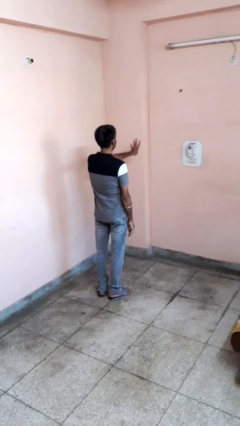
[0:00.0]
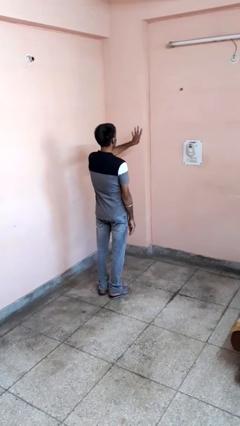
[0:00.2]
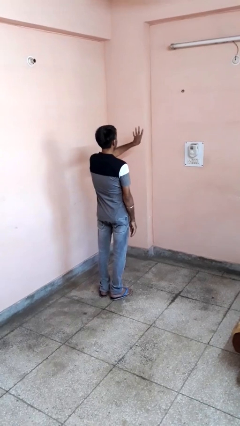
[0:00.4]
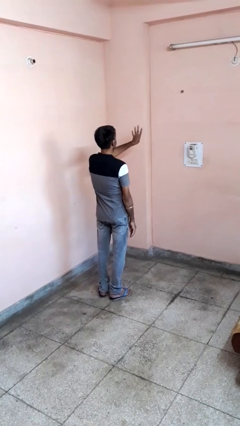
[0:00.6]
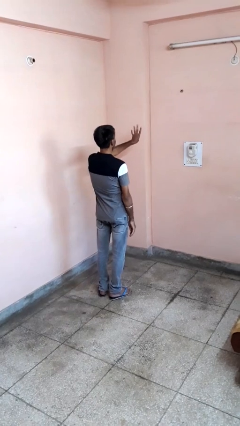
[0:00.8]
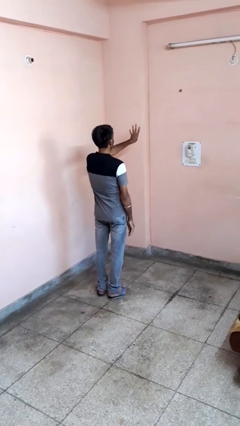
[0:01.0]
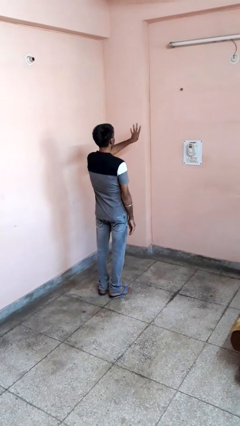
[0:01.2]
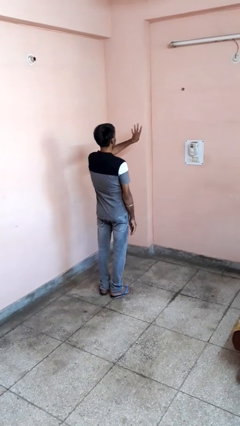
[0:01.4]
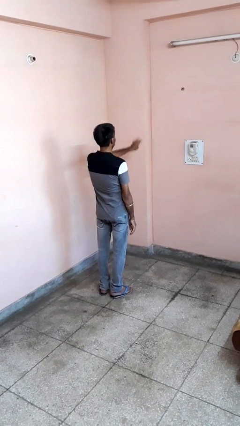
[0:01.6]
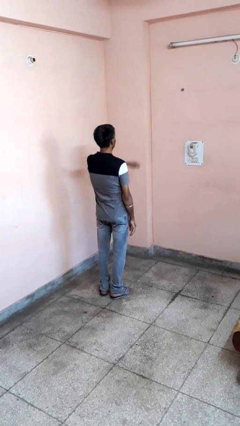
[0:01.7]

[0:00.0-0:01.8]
person gestures number four

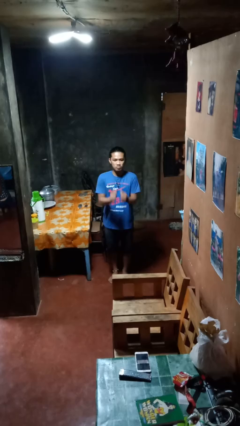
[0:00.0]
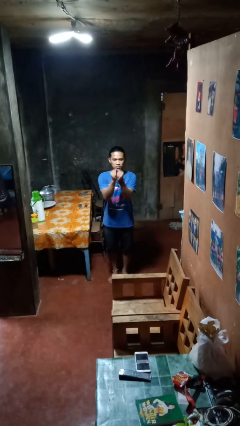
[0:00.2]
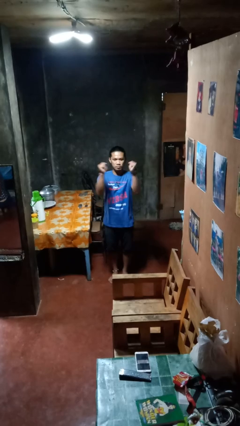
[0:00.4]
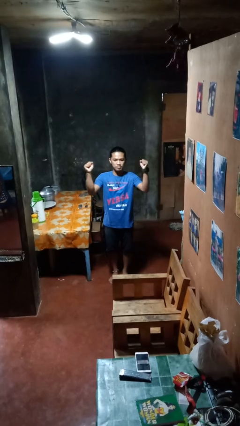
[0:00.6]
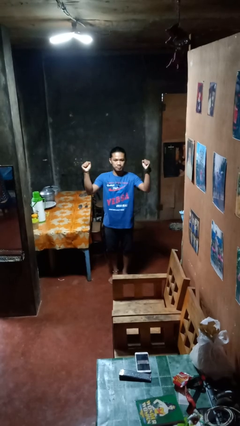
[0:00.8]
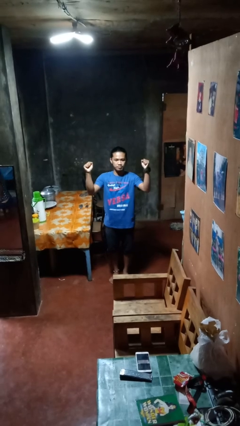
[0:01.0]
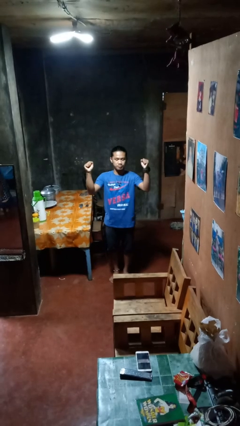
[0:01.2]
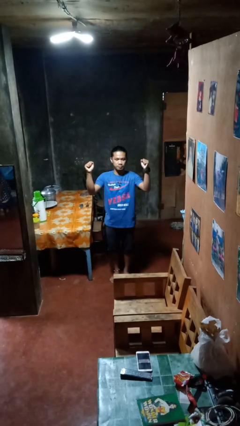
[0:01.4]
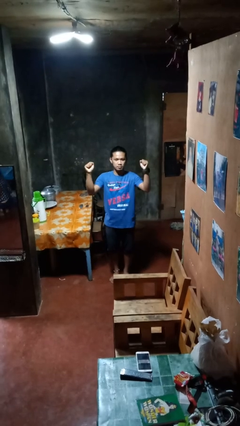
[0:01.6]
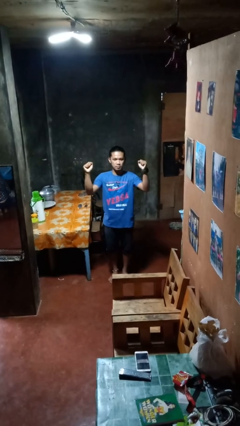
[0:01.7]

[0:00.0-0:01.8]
person gestures zoom in

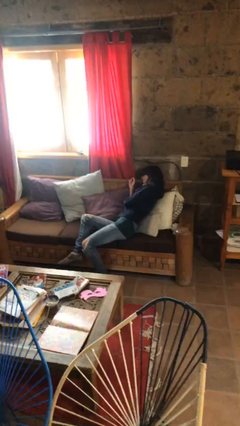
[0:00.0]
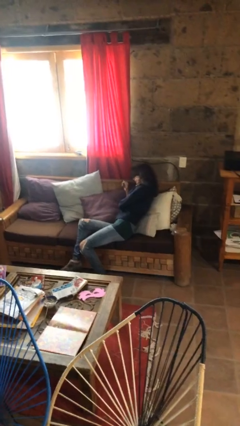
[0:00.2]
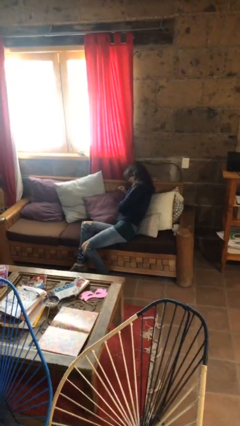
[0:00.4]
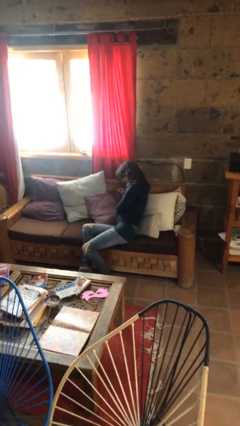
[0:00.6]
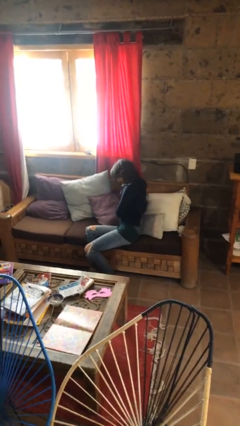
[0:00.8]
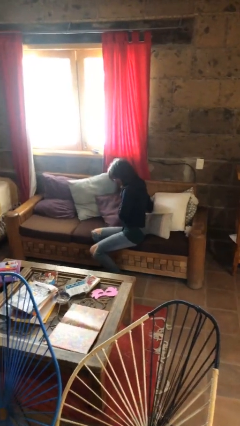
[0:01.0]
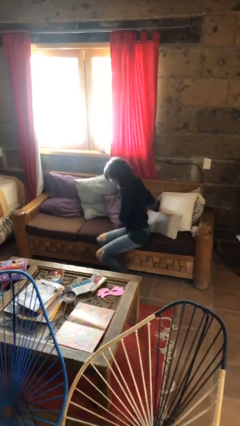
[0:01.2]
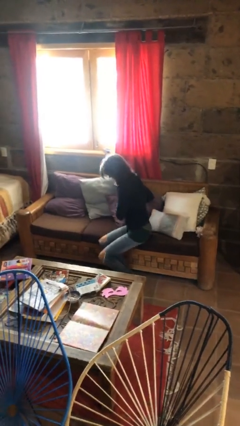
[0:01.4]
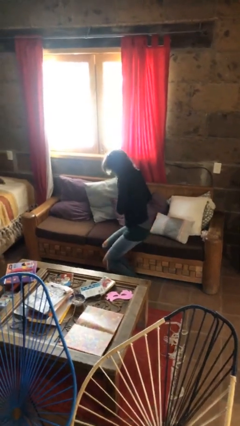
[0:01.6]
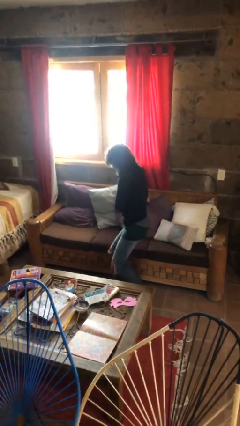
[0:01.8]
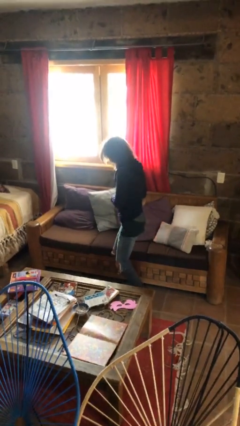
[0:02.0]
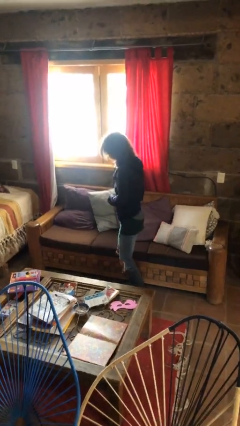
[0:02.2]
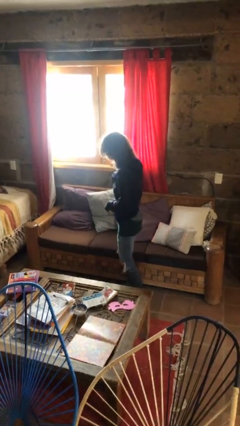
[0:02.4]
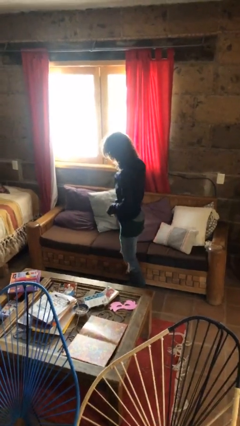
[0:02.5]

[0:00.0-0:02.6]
person stands up

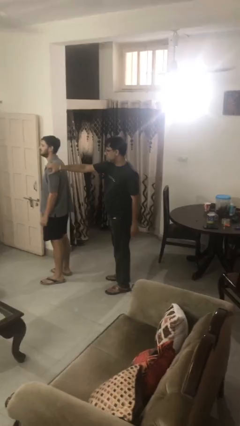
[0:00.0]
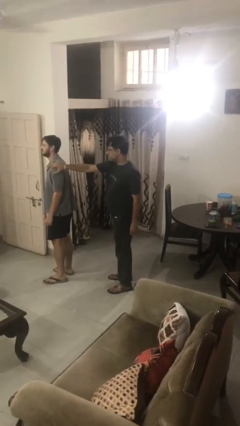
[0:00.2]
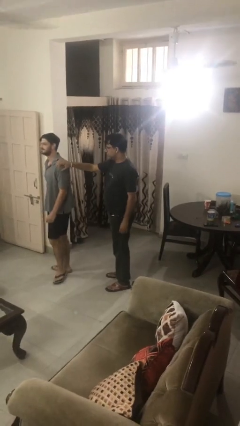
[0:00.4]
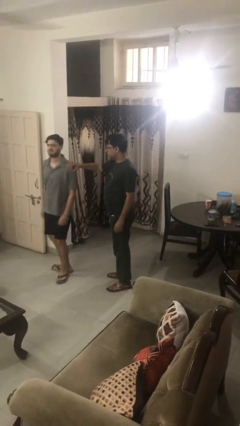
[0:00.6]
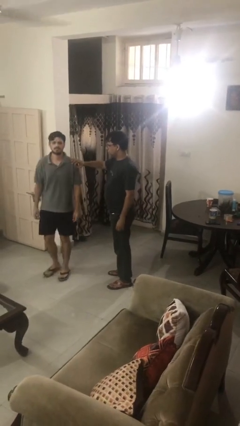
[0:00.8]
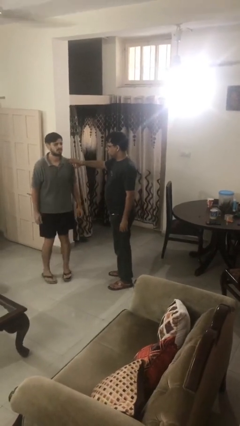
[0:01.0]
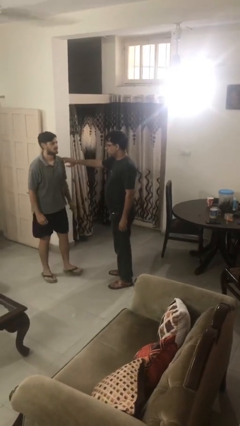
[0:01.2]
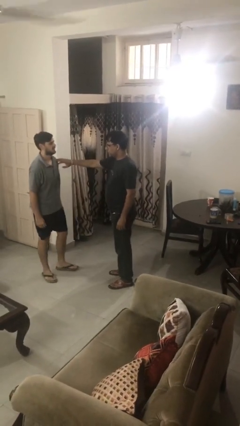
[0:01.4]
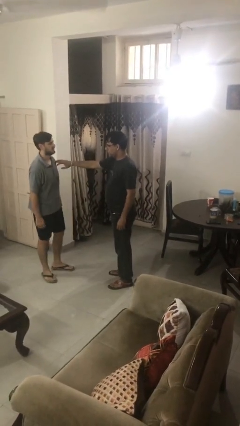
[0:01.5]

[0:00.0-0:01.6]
person spins person around

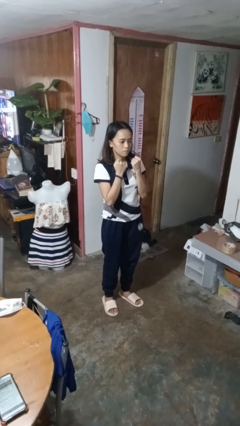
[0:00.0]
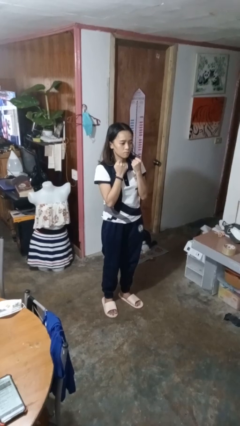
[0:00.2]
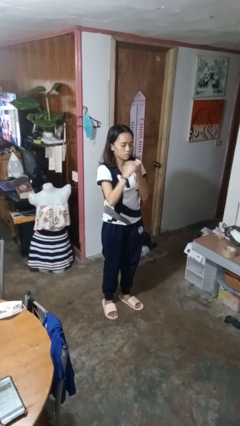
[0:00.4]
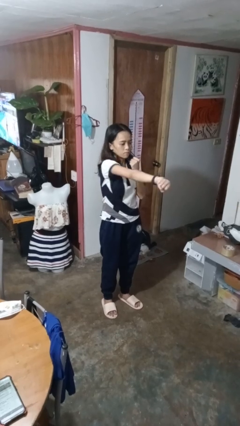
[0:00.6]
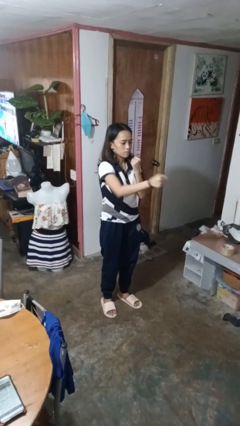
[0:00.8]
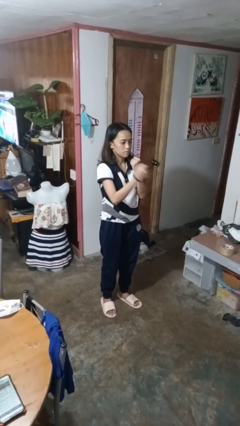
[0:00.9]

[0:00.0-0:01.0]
person punches

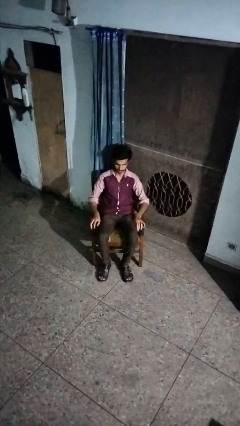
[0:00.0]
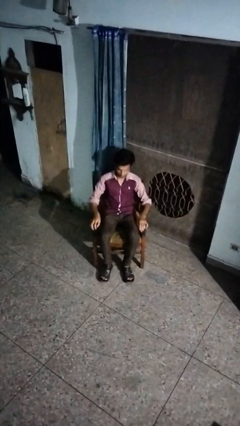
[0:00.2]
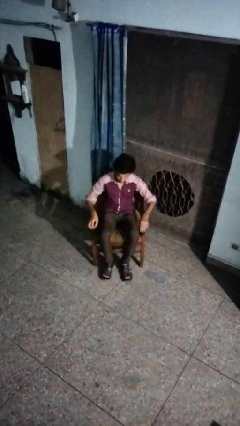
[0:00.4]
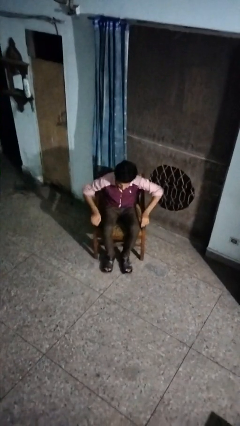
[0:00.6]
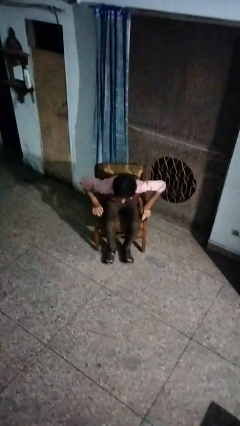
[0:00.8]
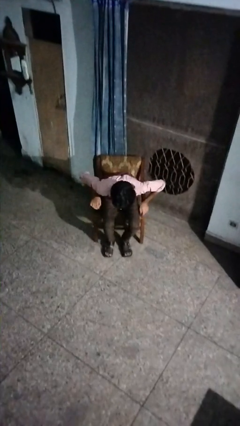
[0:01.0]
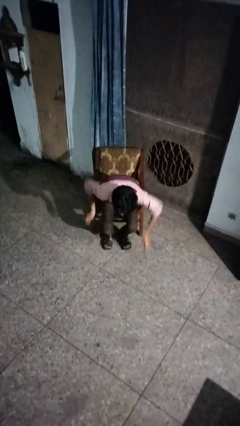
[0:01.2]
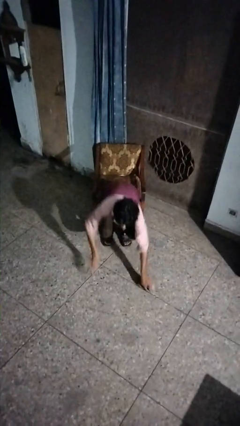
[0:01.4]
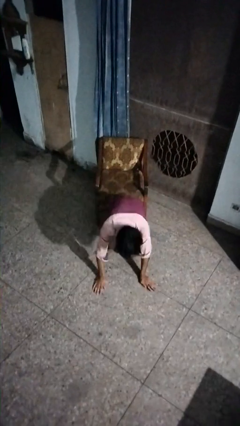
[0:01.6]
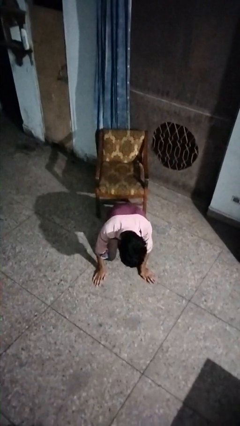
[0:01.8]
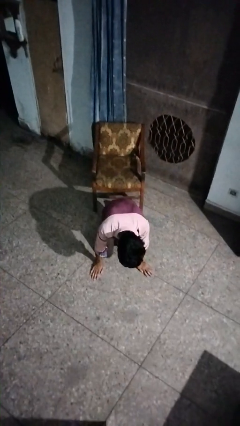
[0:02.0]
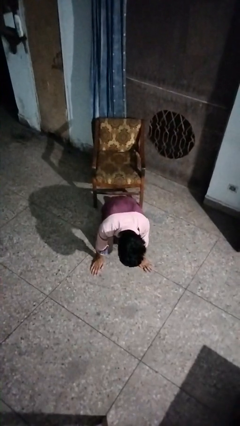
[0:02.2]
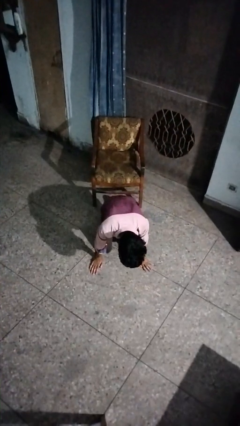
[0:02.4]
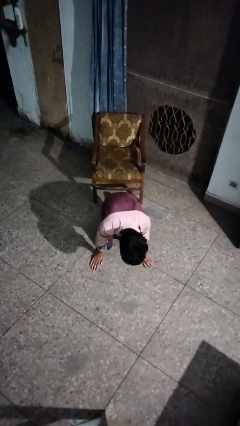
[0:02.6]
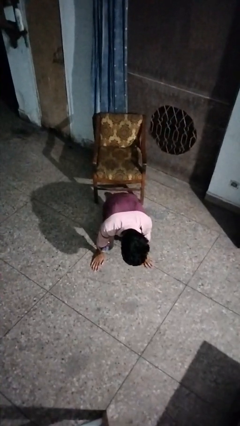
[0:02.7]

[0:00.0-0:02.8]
person falls from chair

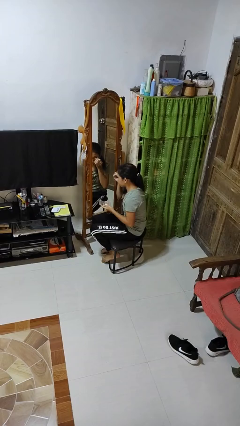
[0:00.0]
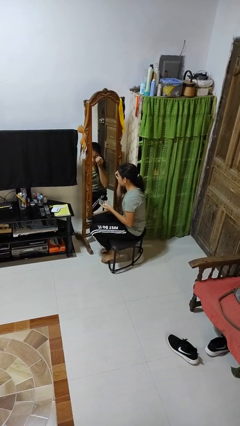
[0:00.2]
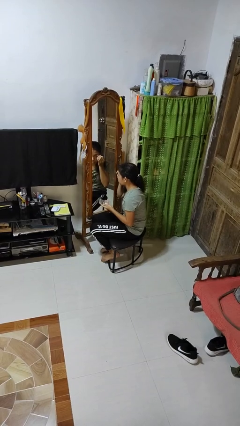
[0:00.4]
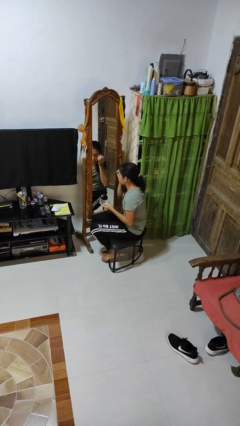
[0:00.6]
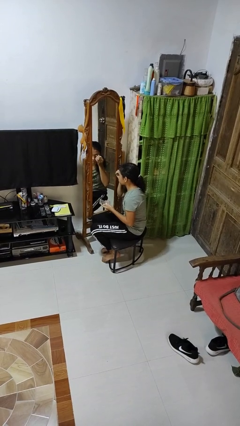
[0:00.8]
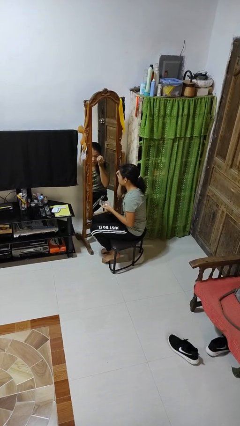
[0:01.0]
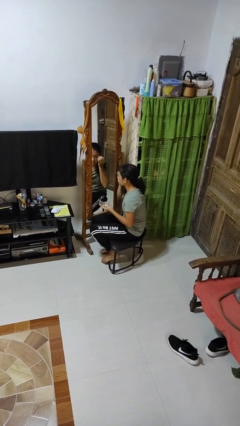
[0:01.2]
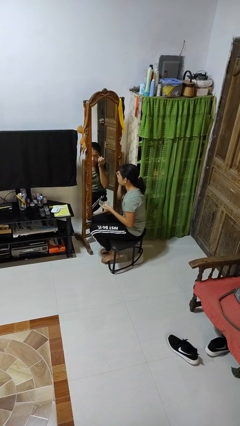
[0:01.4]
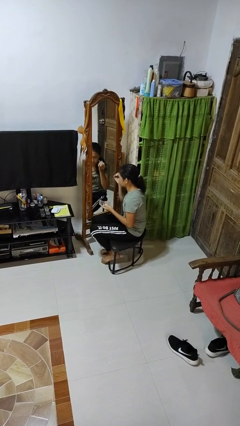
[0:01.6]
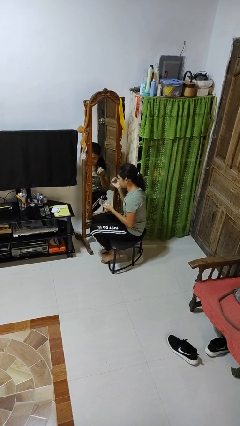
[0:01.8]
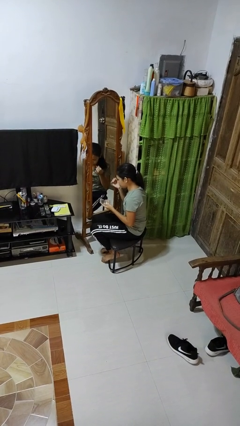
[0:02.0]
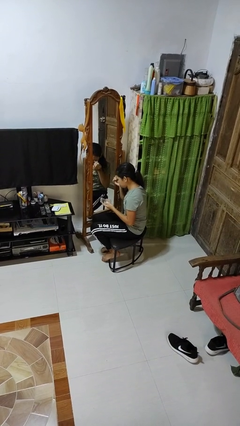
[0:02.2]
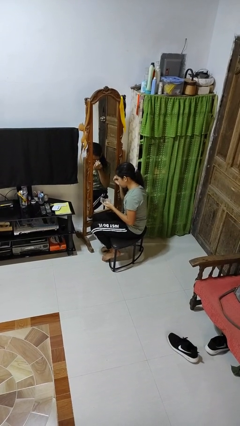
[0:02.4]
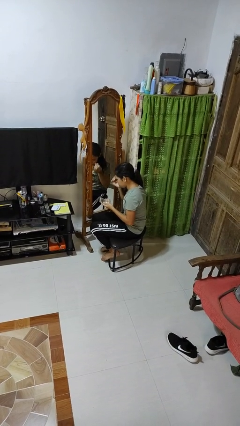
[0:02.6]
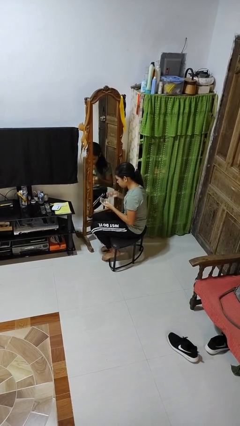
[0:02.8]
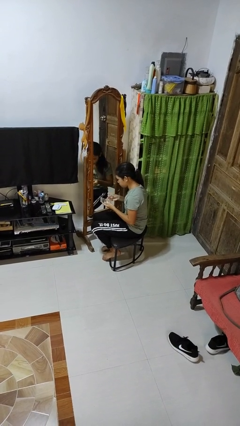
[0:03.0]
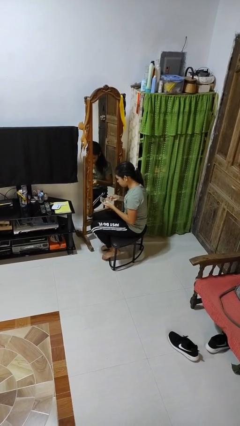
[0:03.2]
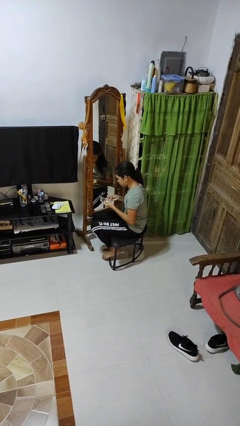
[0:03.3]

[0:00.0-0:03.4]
person applies eye makeup

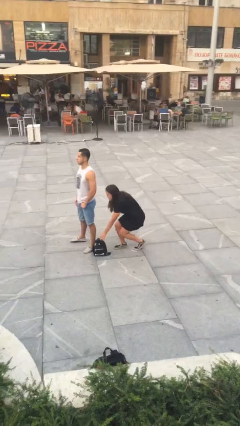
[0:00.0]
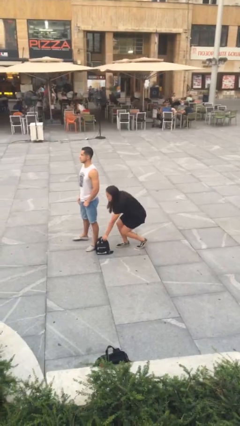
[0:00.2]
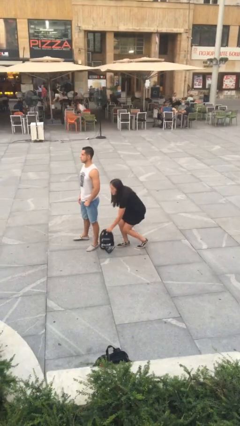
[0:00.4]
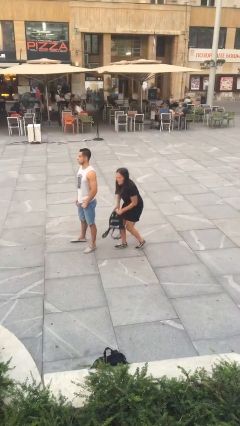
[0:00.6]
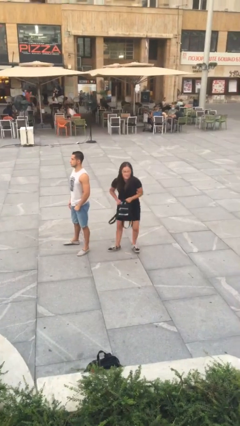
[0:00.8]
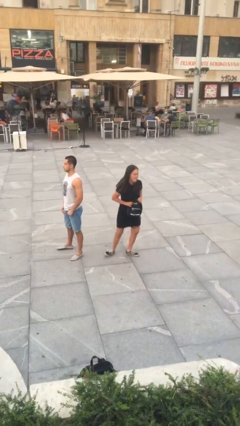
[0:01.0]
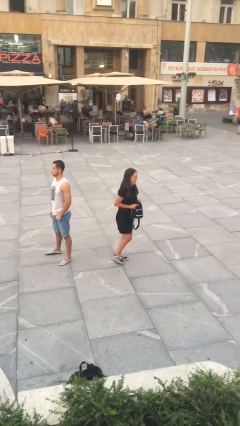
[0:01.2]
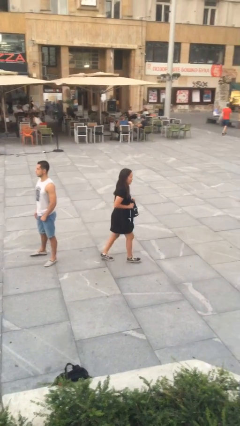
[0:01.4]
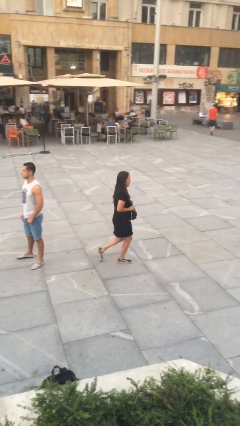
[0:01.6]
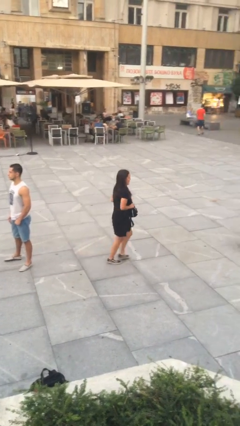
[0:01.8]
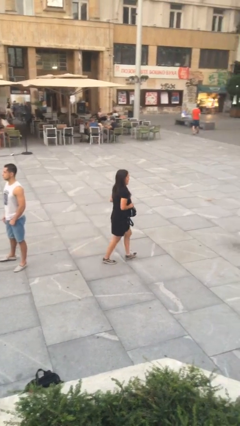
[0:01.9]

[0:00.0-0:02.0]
person steals object from person
